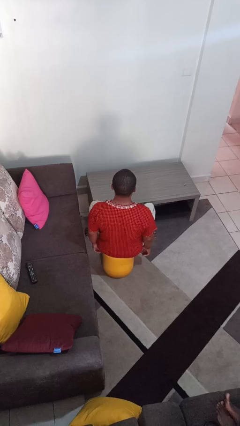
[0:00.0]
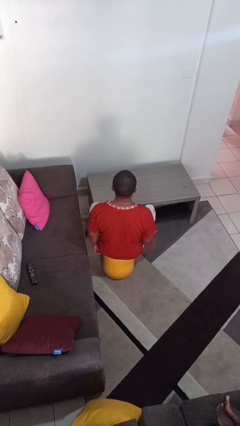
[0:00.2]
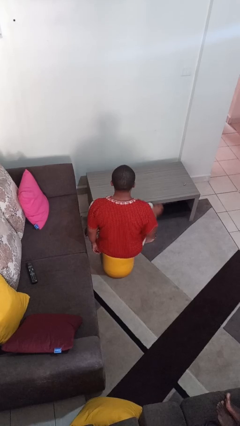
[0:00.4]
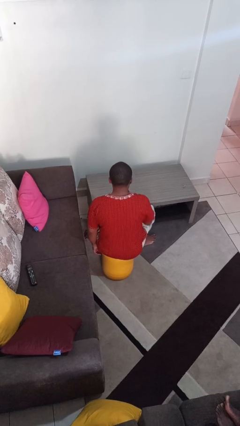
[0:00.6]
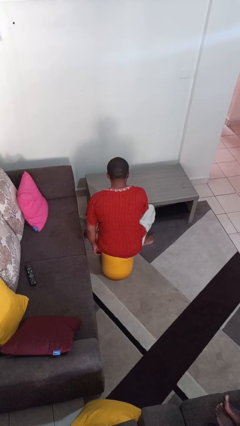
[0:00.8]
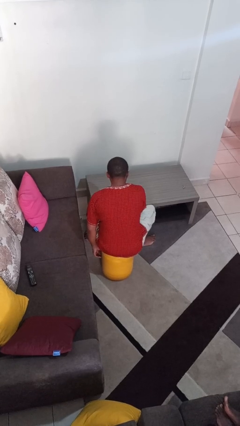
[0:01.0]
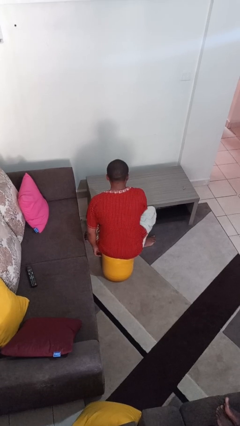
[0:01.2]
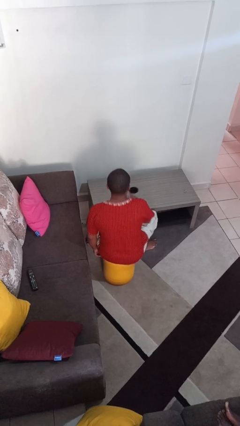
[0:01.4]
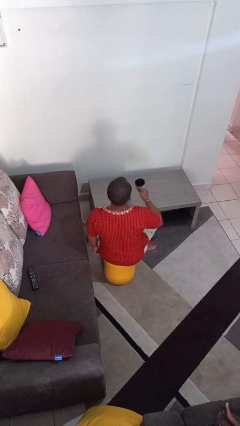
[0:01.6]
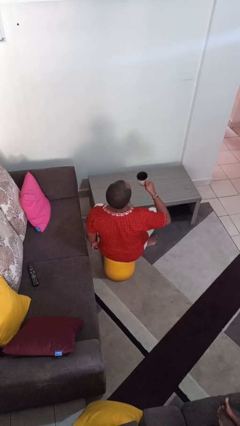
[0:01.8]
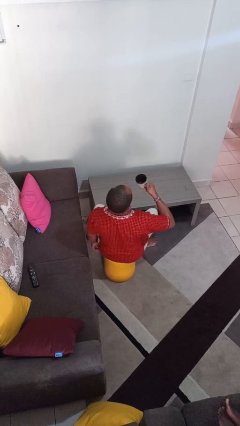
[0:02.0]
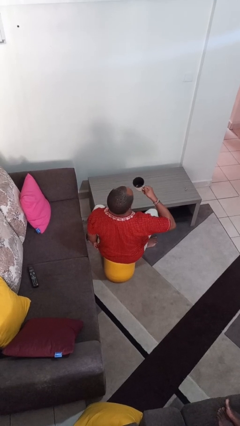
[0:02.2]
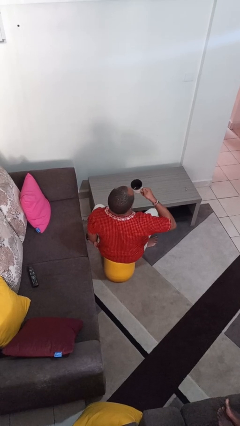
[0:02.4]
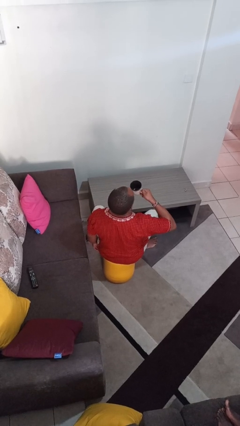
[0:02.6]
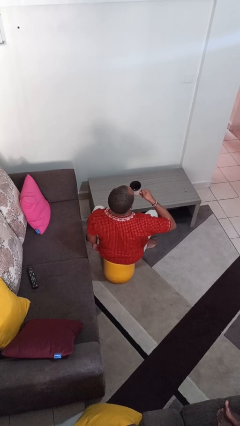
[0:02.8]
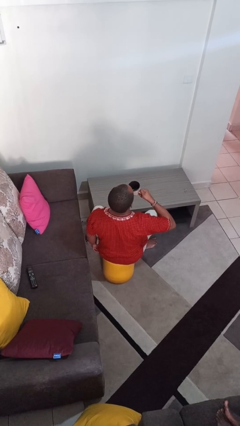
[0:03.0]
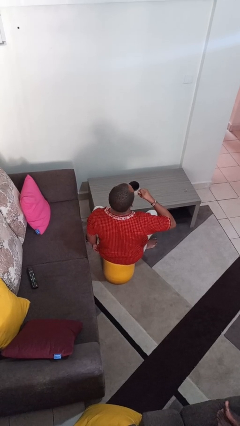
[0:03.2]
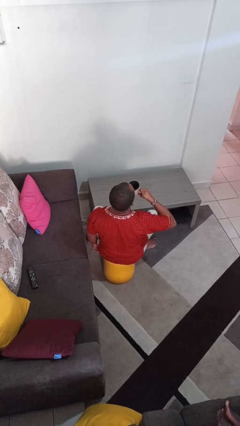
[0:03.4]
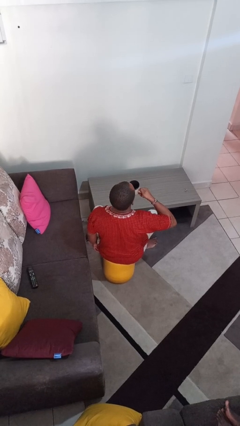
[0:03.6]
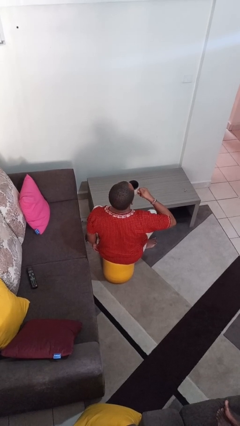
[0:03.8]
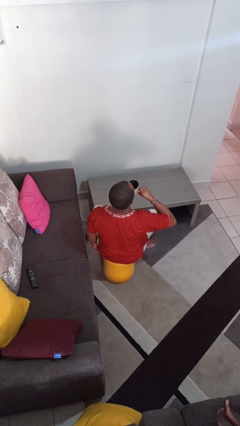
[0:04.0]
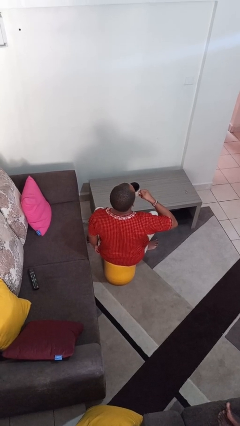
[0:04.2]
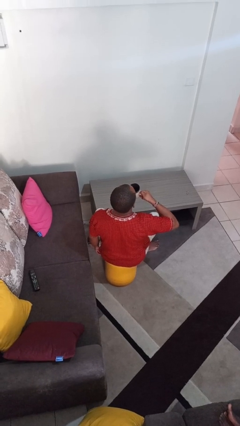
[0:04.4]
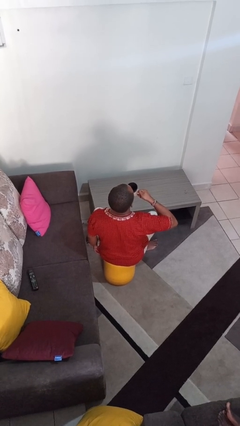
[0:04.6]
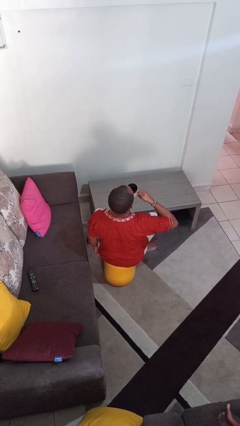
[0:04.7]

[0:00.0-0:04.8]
person picks up object from table

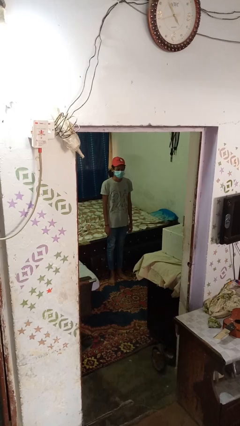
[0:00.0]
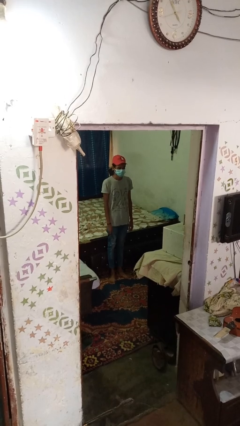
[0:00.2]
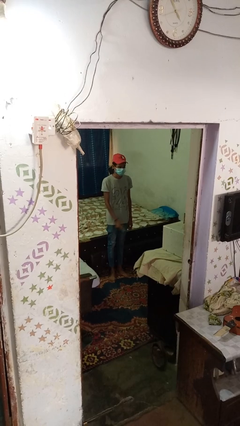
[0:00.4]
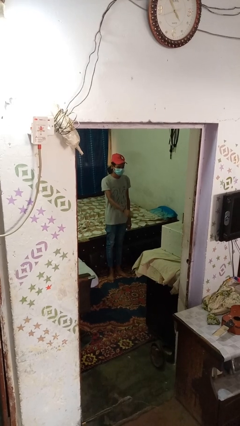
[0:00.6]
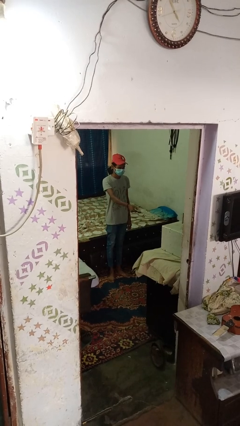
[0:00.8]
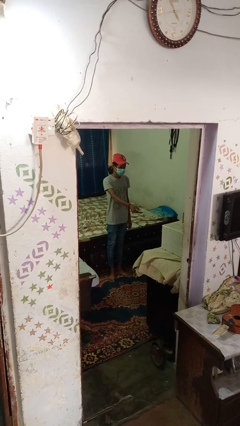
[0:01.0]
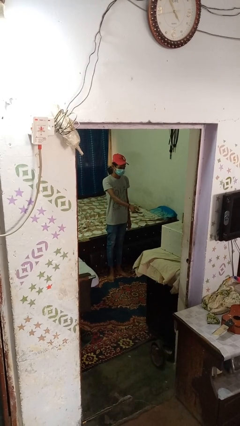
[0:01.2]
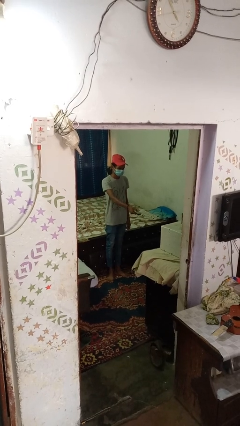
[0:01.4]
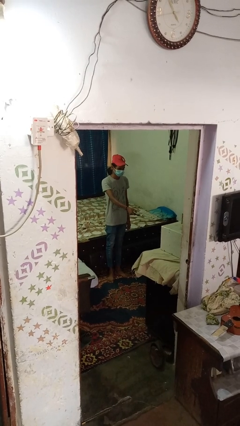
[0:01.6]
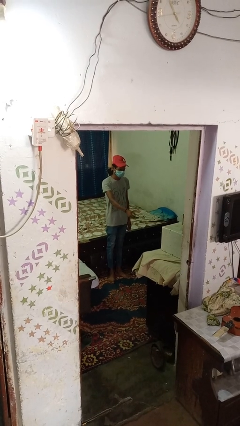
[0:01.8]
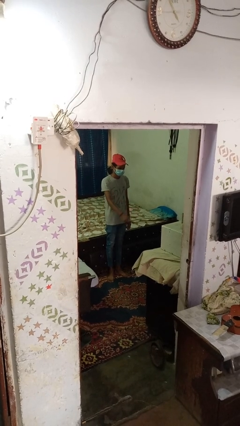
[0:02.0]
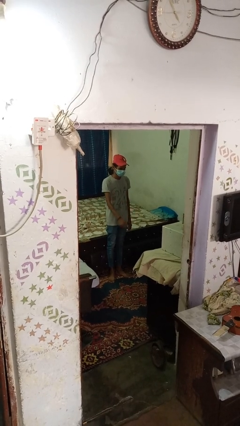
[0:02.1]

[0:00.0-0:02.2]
person uses television remote

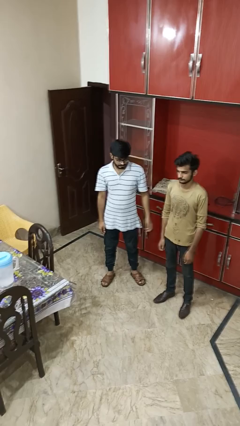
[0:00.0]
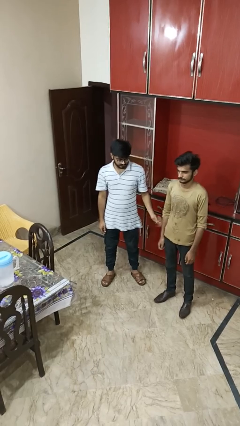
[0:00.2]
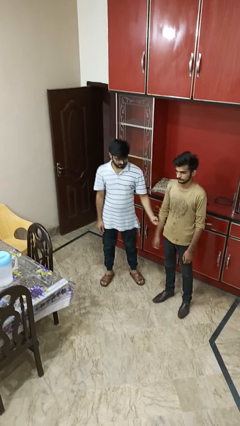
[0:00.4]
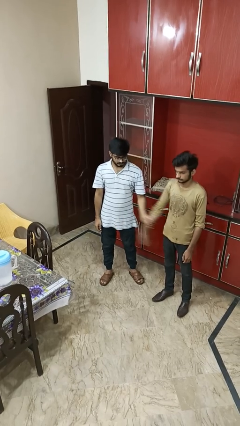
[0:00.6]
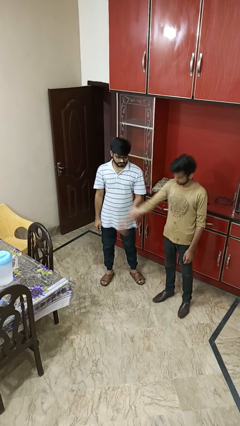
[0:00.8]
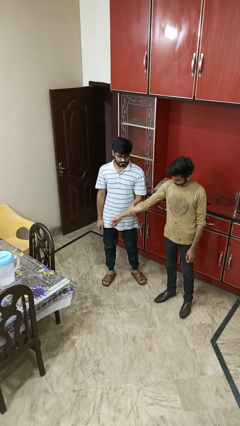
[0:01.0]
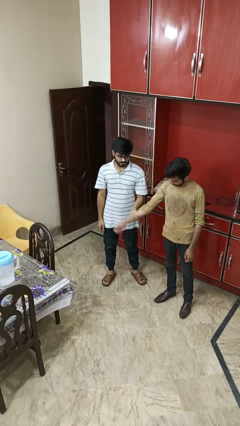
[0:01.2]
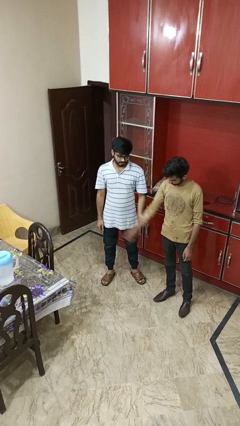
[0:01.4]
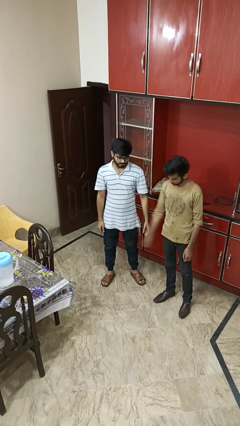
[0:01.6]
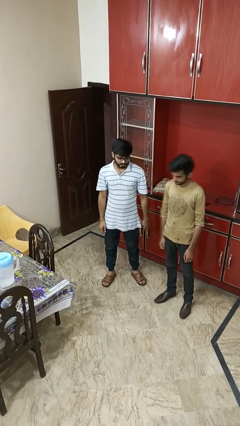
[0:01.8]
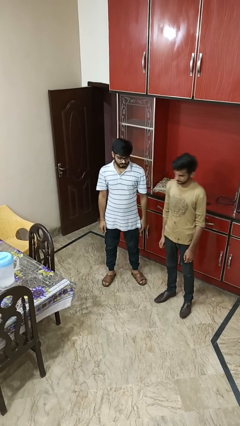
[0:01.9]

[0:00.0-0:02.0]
person grabs person by forearm

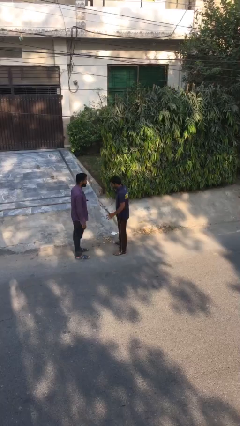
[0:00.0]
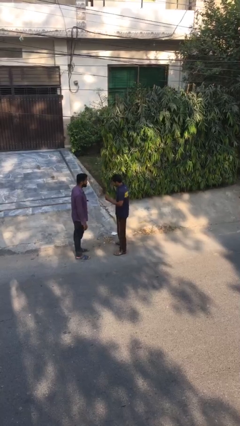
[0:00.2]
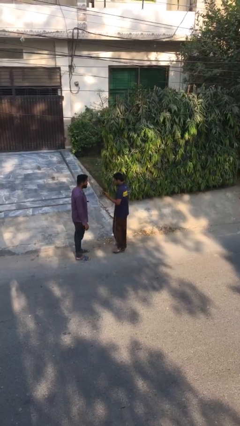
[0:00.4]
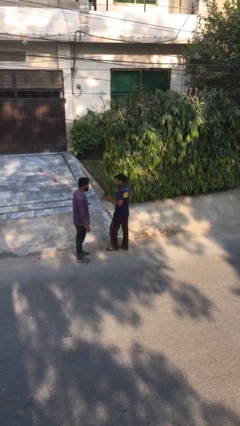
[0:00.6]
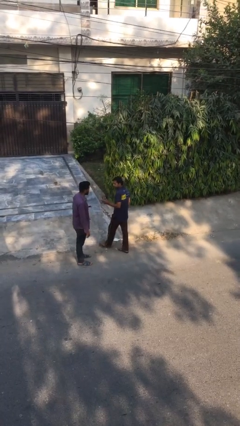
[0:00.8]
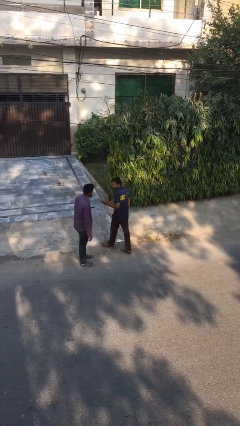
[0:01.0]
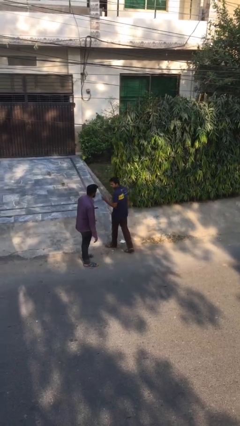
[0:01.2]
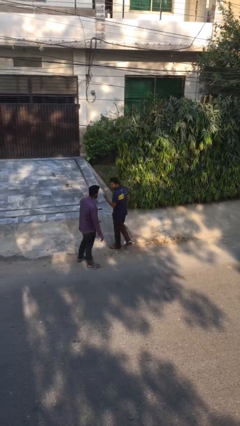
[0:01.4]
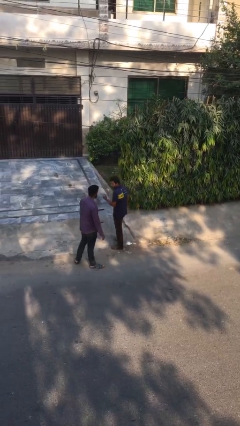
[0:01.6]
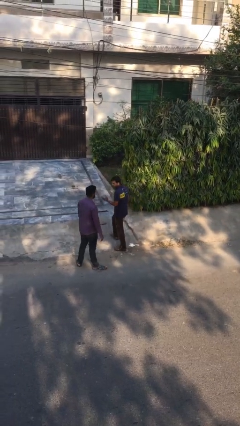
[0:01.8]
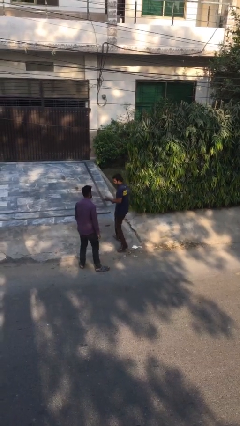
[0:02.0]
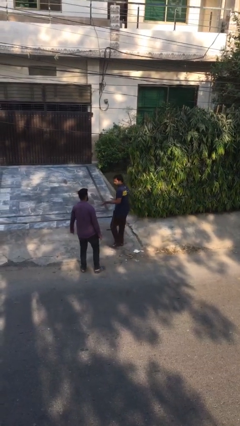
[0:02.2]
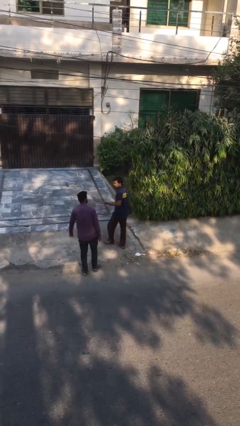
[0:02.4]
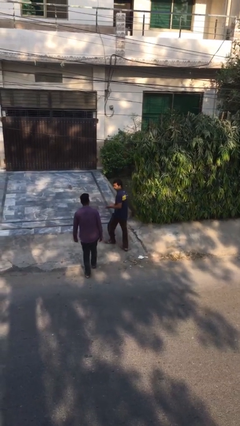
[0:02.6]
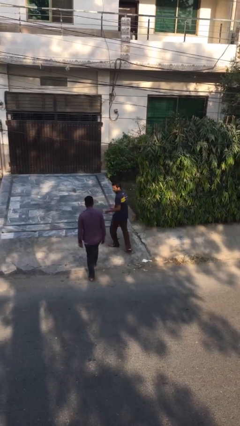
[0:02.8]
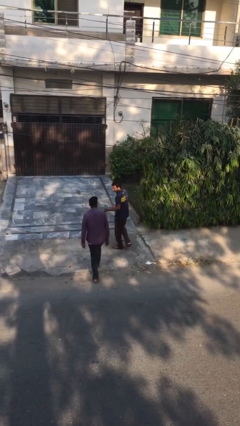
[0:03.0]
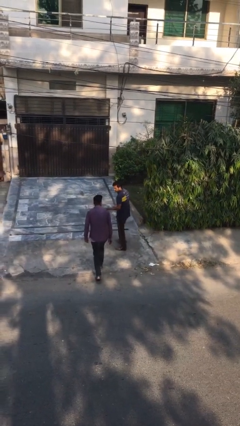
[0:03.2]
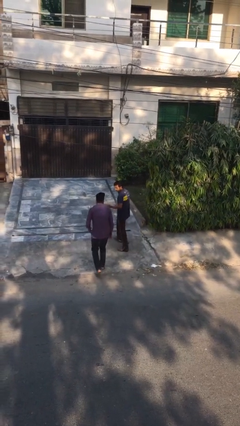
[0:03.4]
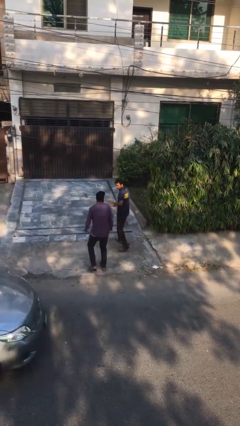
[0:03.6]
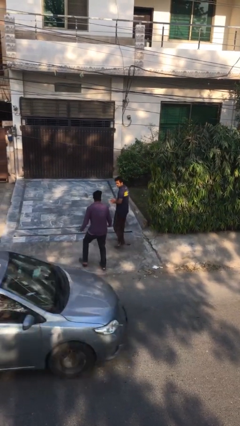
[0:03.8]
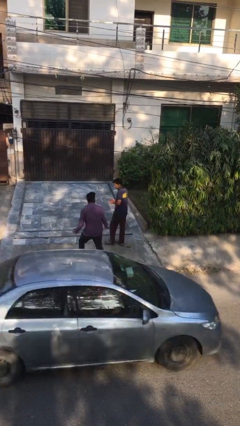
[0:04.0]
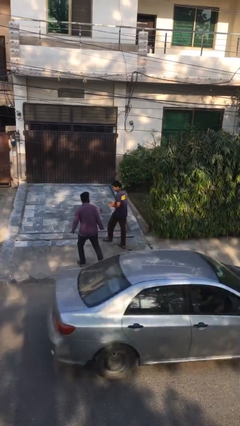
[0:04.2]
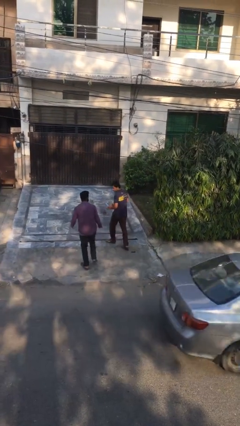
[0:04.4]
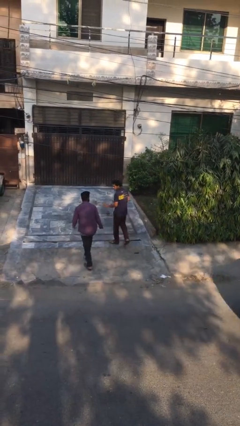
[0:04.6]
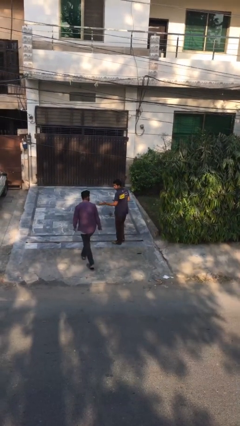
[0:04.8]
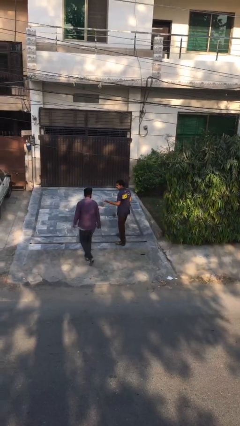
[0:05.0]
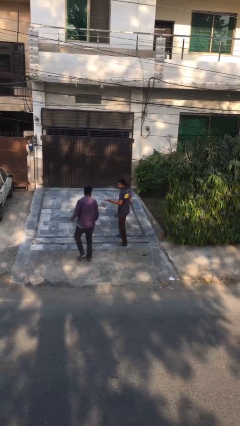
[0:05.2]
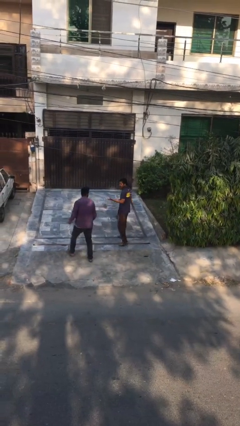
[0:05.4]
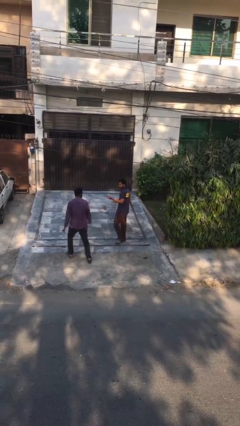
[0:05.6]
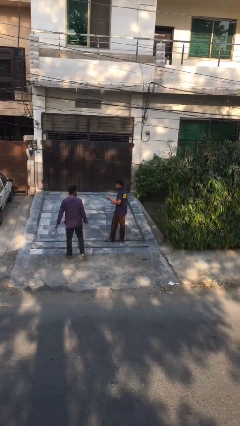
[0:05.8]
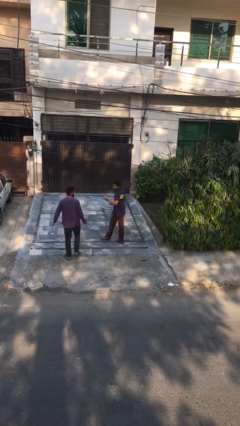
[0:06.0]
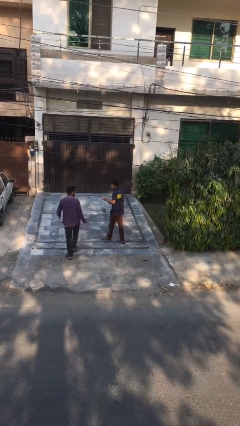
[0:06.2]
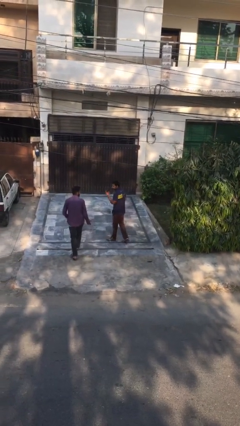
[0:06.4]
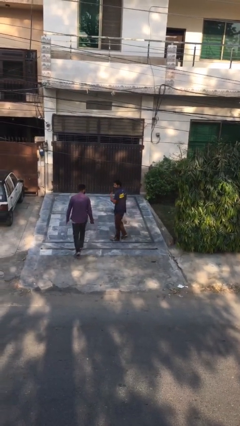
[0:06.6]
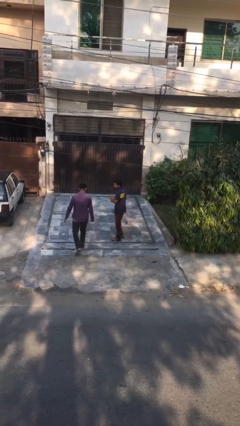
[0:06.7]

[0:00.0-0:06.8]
person talks to person

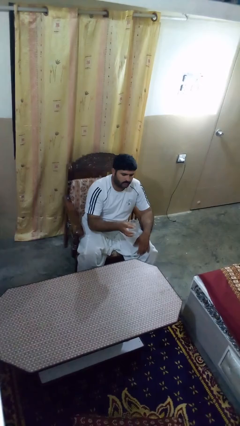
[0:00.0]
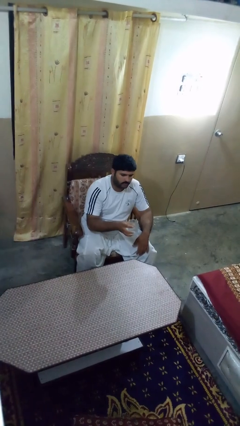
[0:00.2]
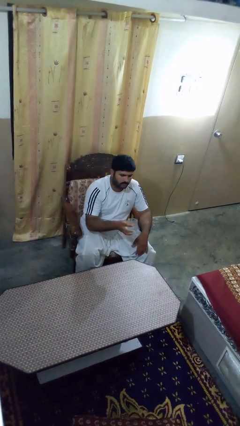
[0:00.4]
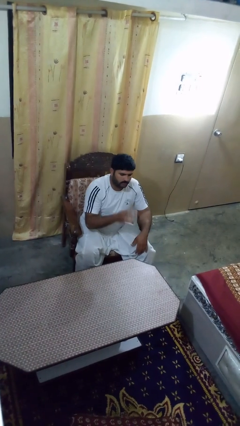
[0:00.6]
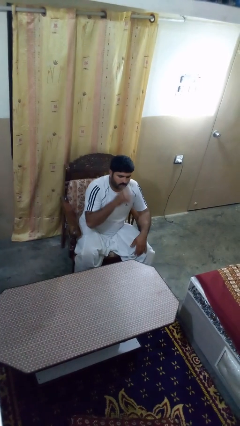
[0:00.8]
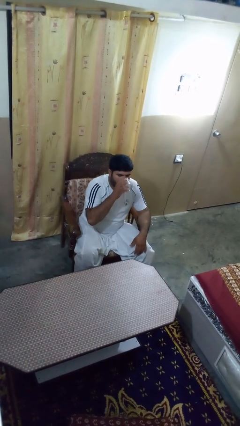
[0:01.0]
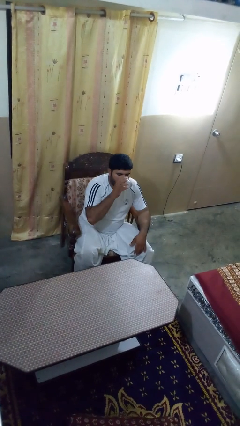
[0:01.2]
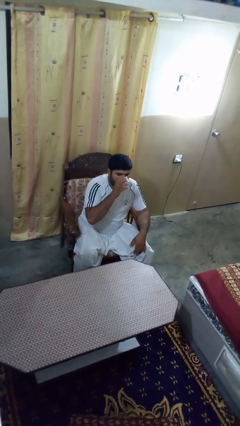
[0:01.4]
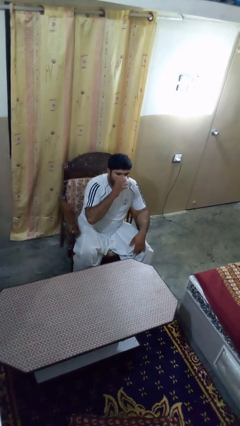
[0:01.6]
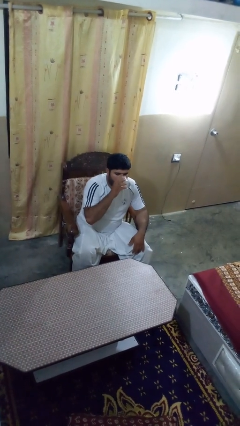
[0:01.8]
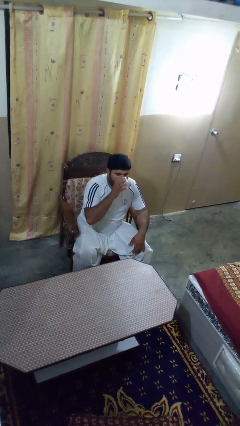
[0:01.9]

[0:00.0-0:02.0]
person drinks from shotglass
